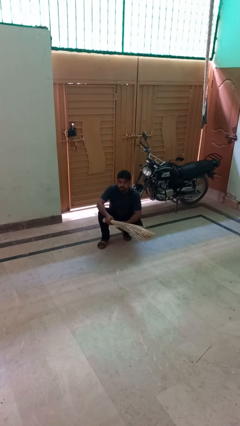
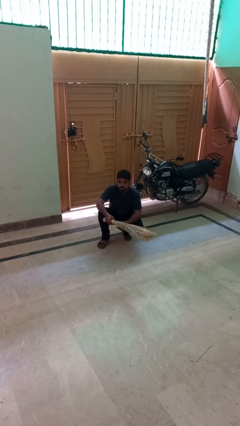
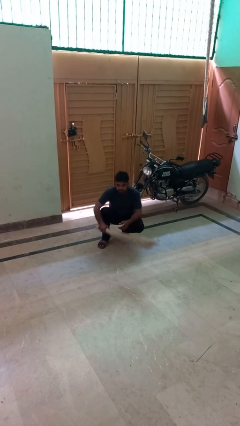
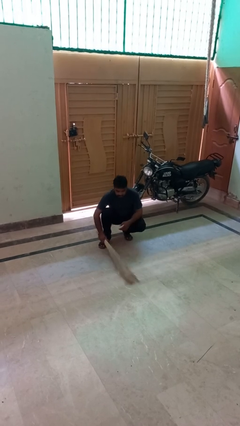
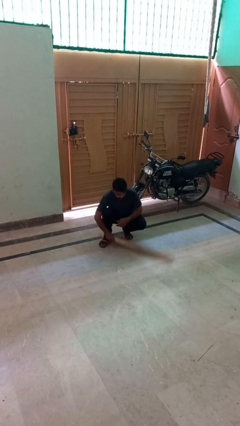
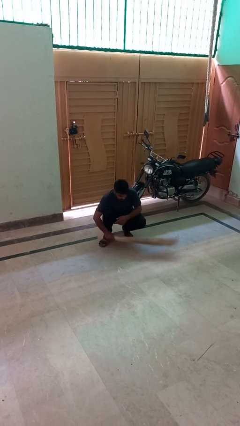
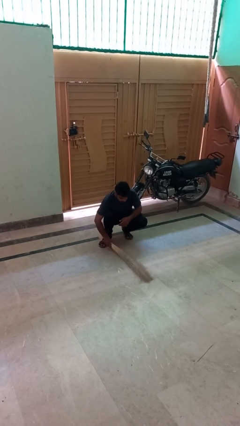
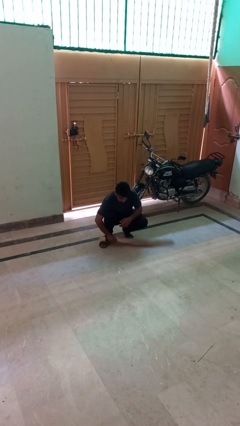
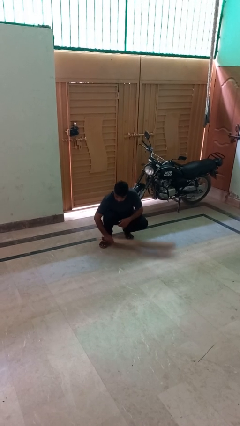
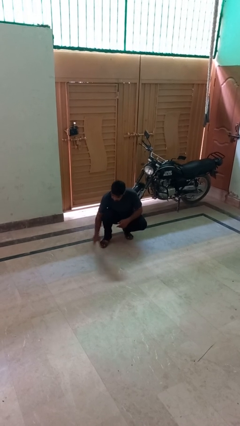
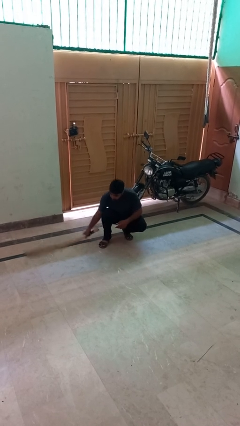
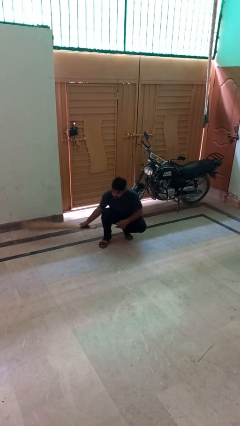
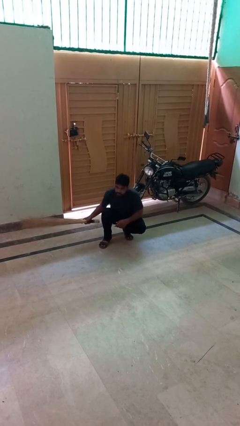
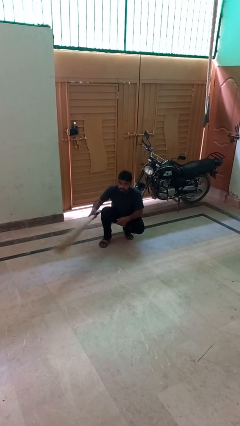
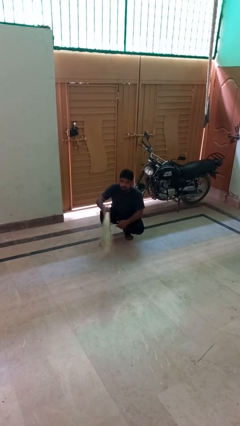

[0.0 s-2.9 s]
person sweeps floor

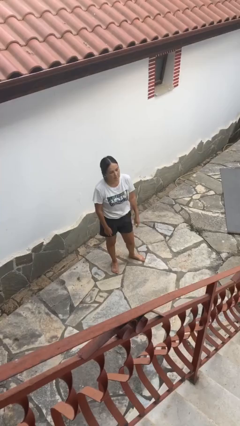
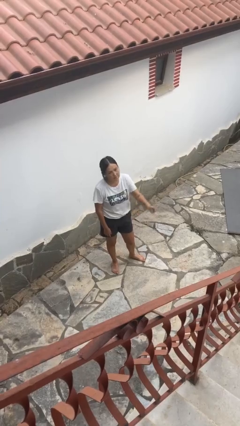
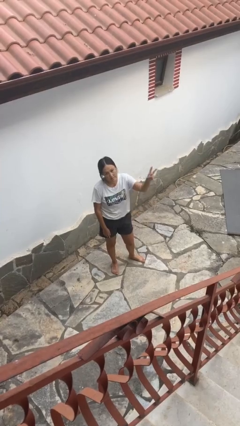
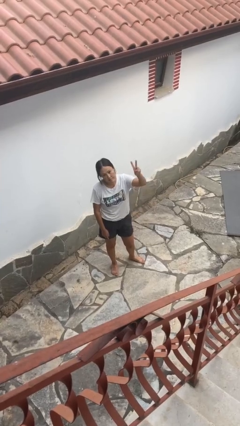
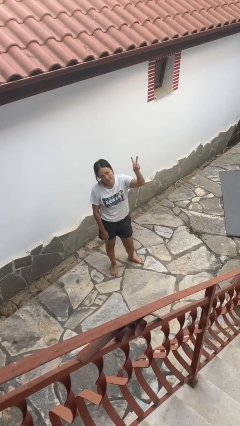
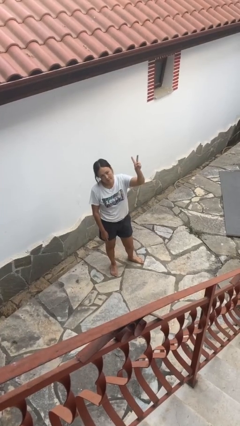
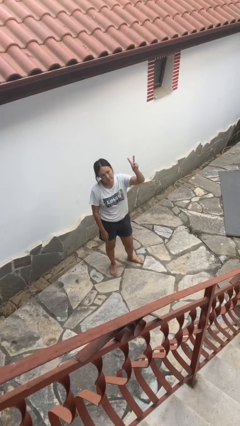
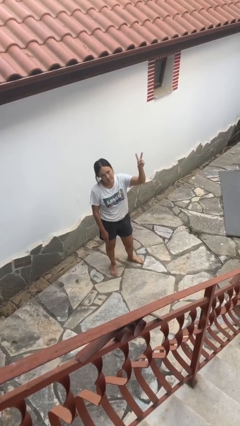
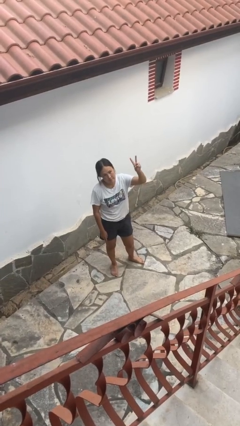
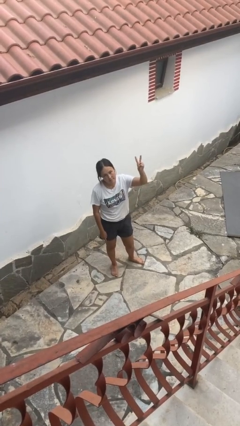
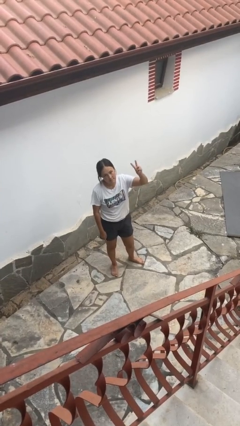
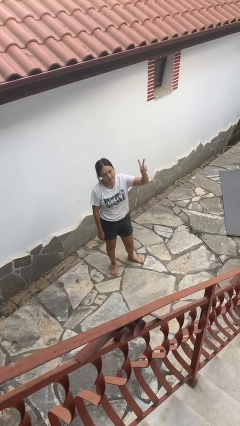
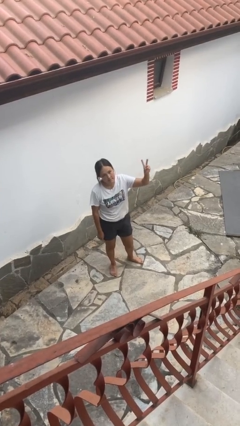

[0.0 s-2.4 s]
person gestures peace

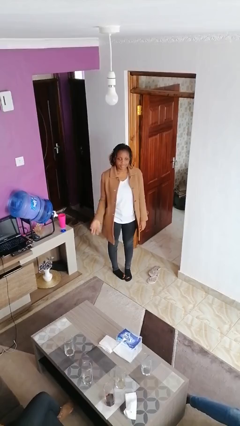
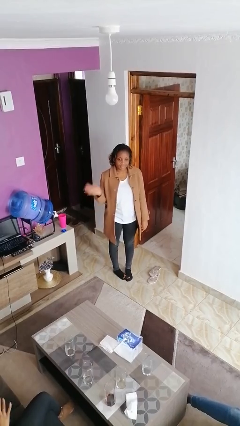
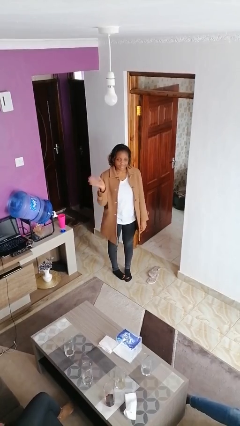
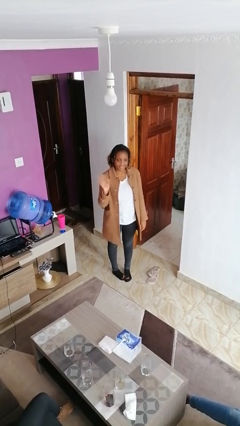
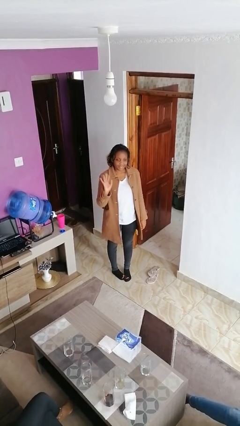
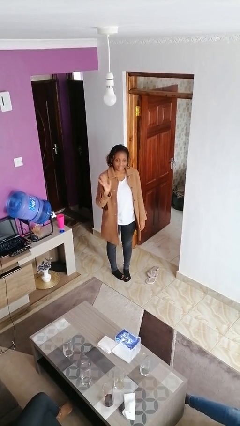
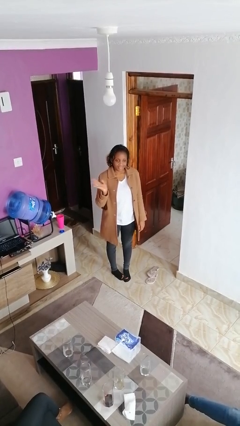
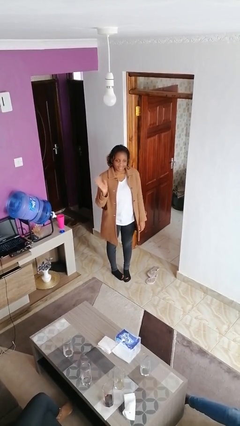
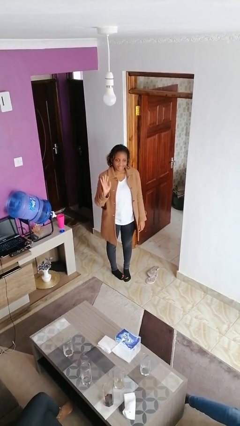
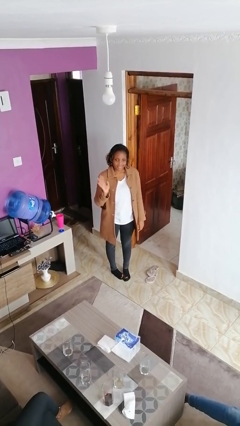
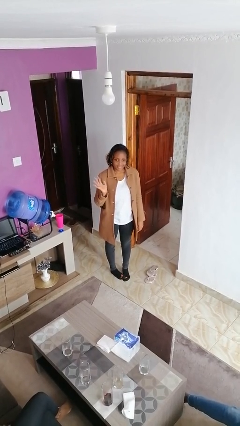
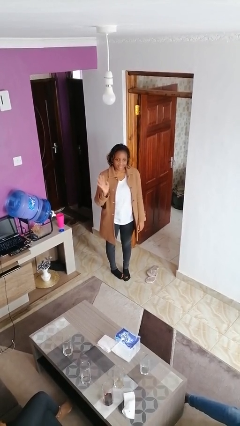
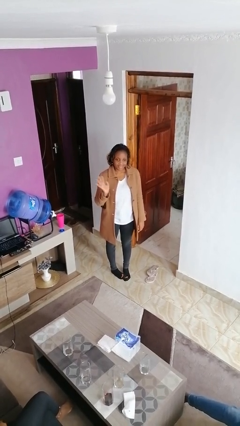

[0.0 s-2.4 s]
person waves at person

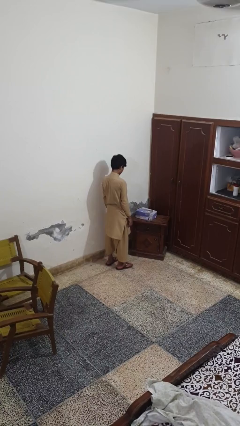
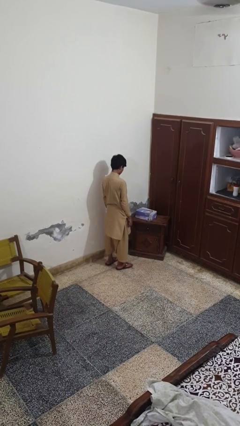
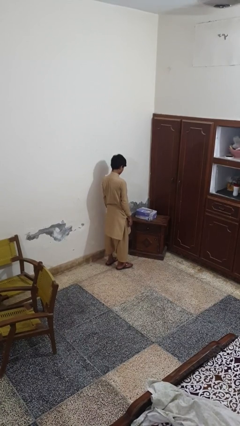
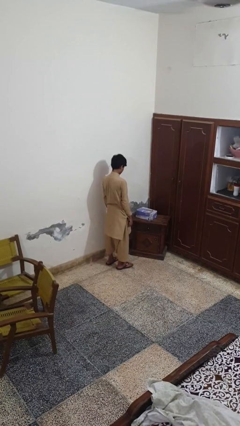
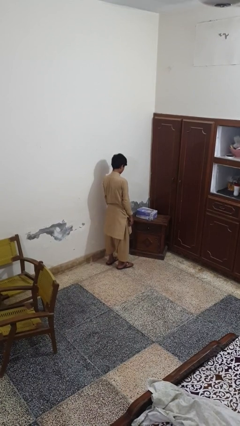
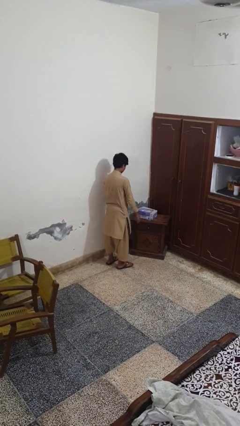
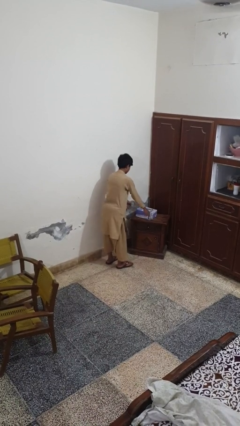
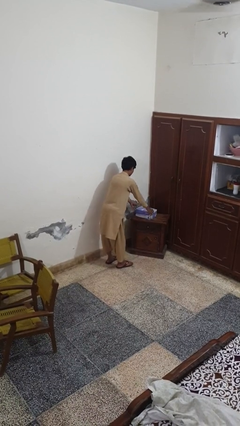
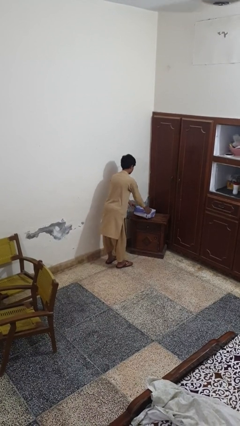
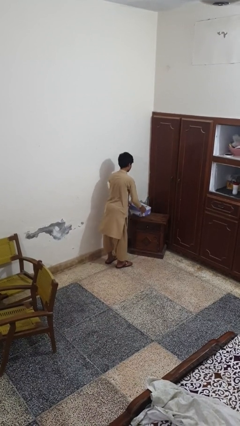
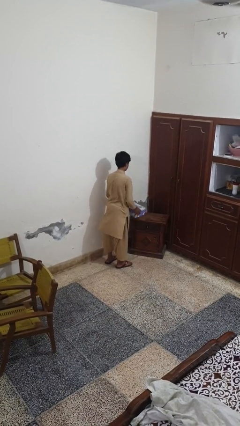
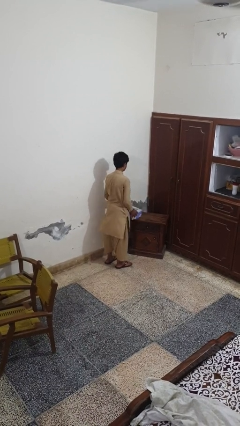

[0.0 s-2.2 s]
person picks up object from table

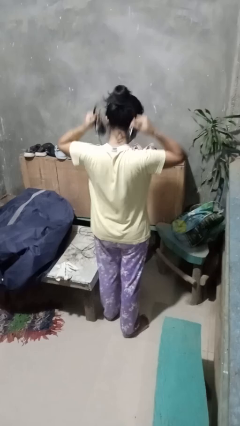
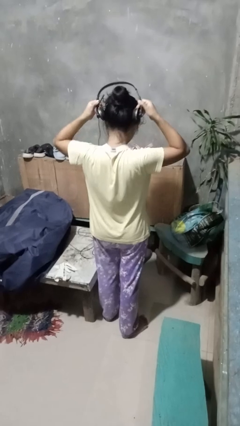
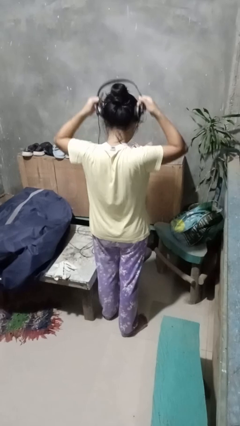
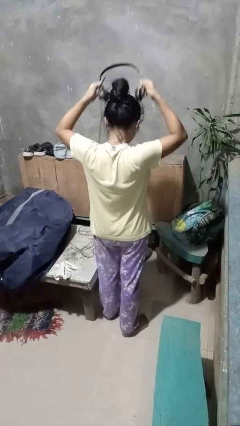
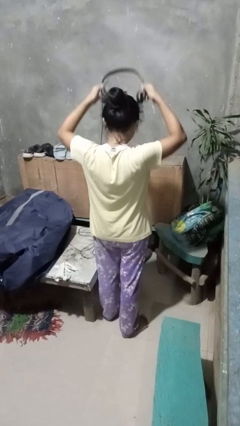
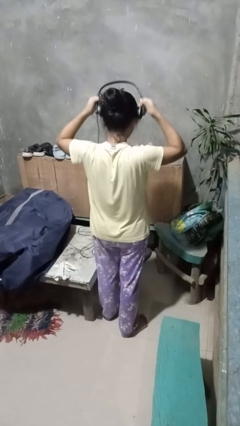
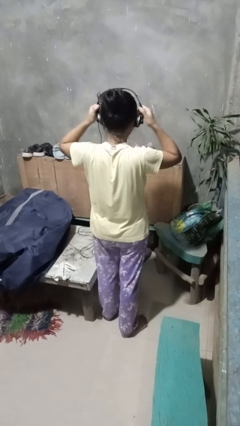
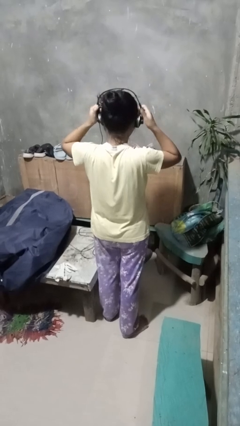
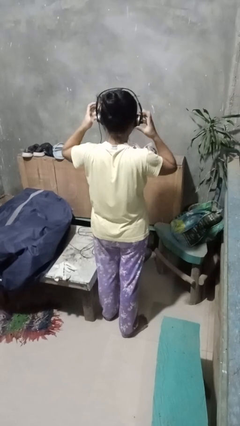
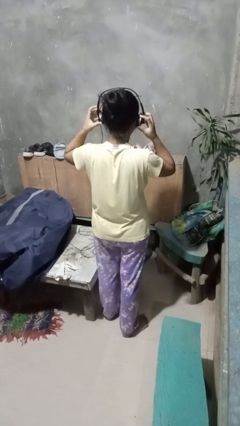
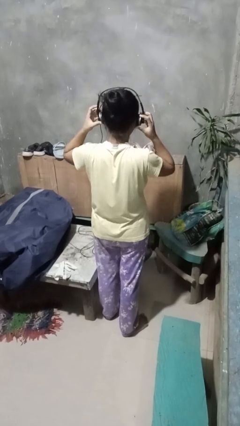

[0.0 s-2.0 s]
person puts on headphones

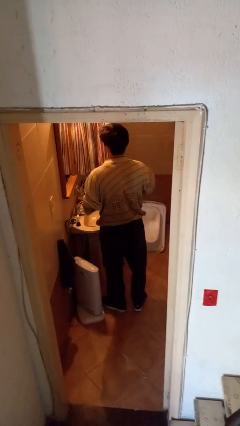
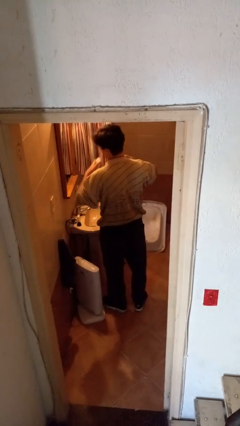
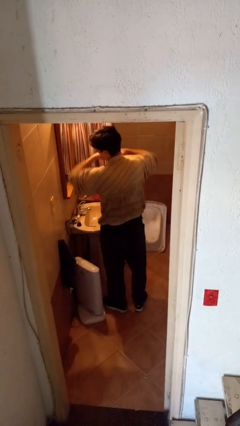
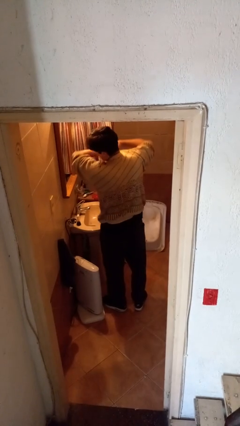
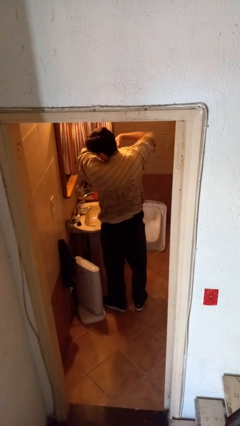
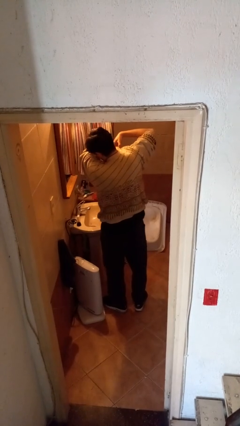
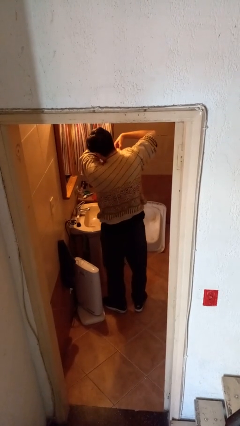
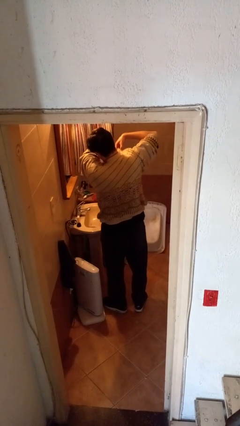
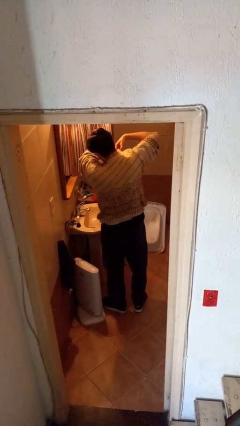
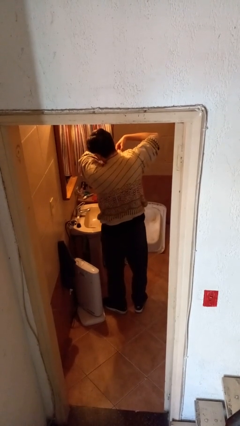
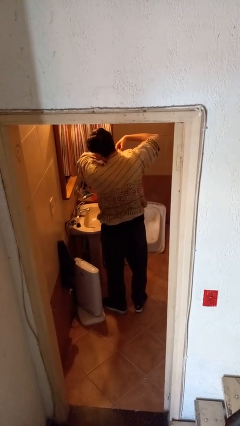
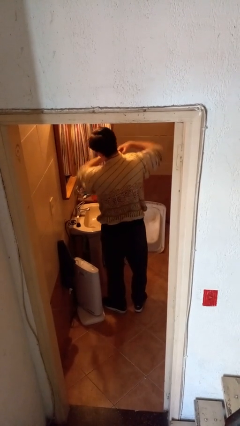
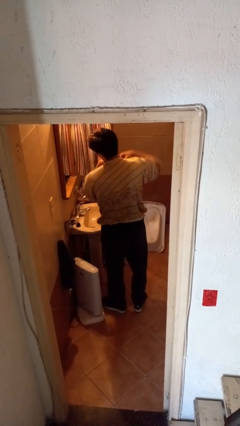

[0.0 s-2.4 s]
person applies deodorant

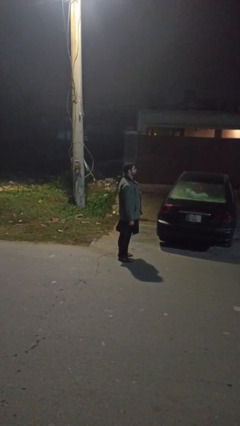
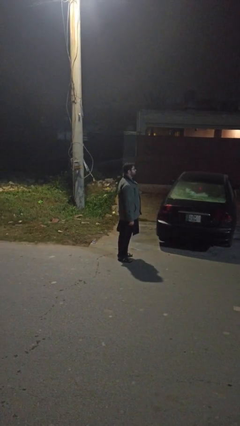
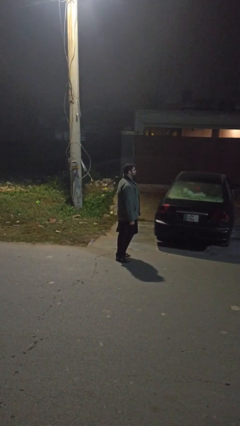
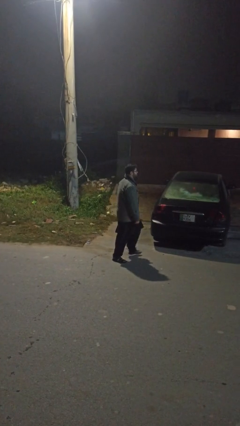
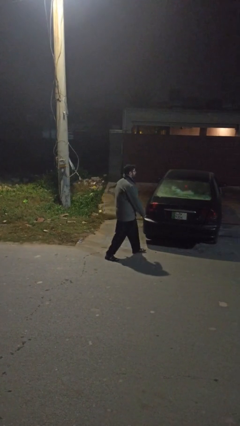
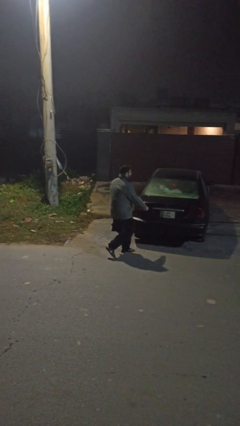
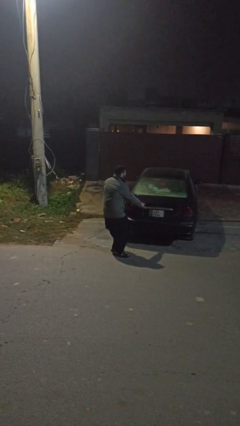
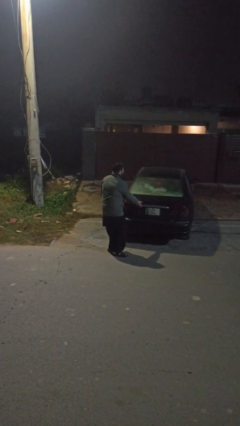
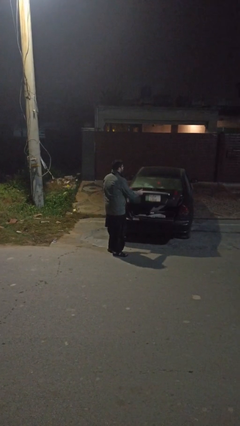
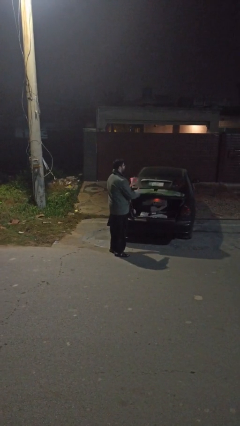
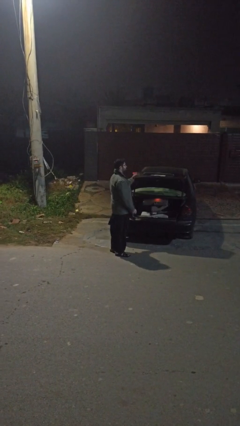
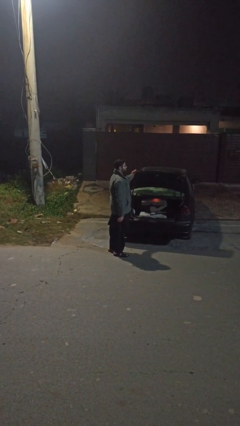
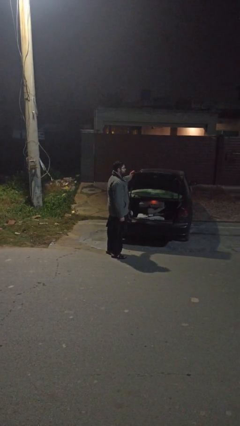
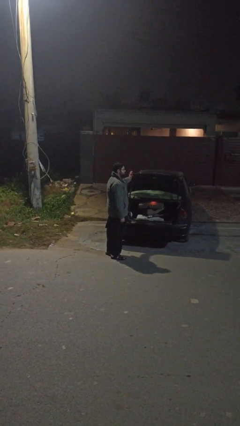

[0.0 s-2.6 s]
person opens car trunk

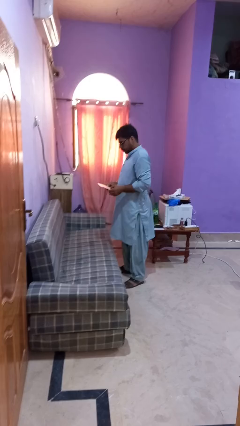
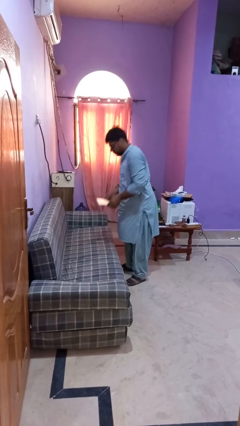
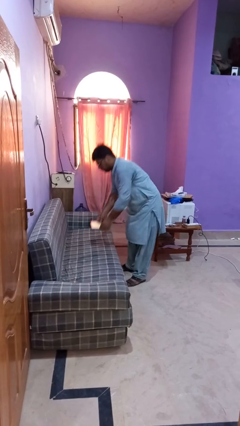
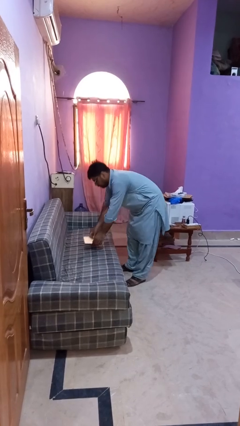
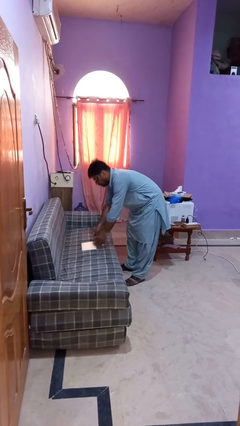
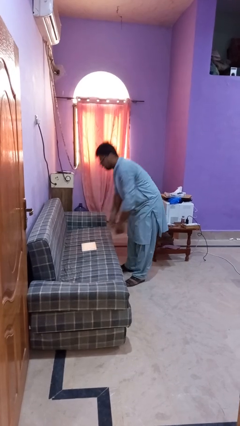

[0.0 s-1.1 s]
person puts down object on couch
